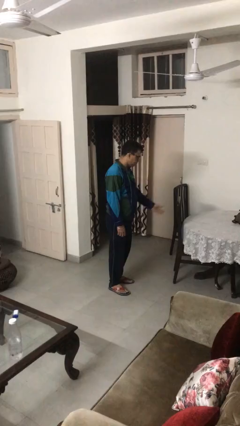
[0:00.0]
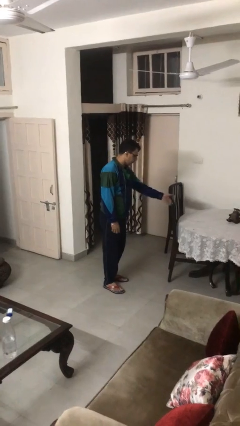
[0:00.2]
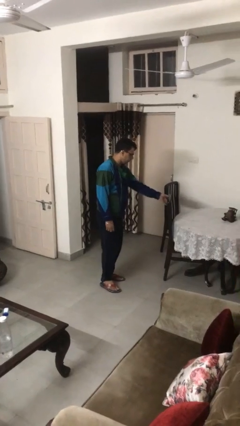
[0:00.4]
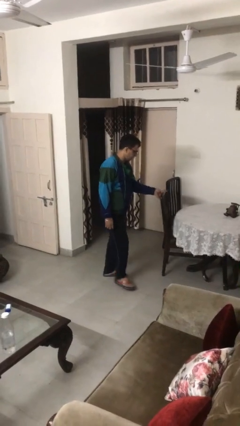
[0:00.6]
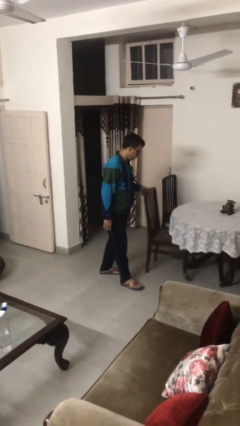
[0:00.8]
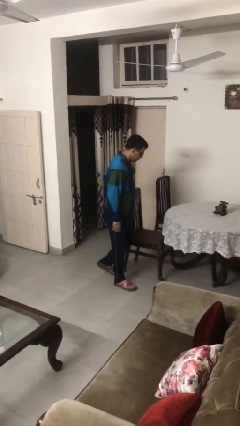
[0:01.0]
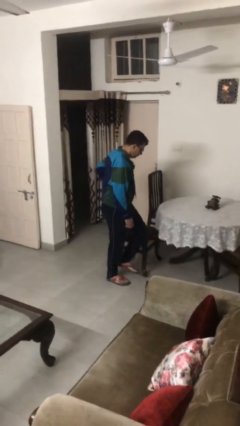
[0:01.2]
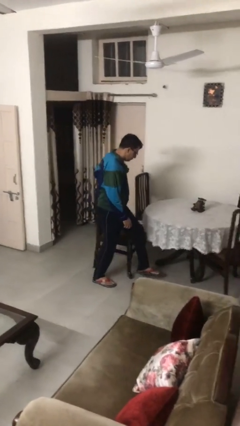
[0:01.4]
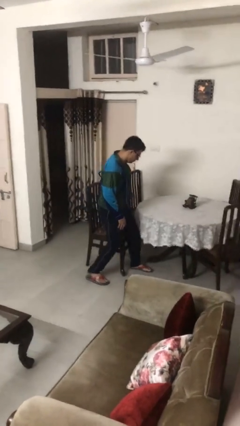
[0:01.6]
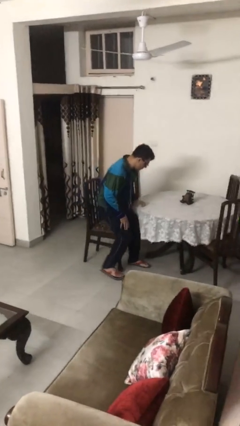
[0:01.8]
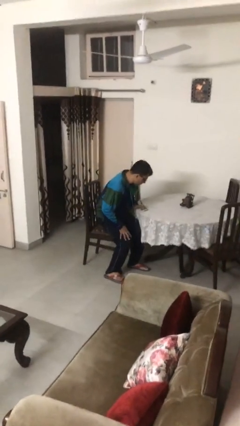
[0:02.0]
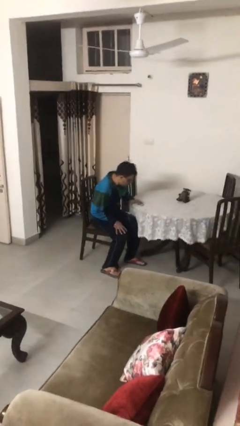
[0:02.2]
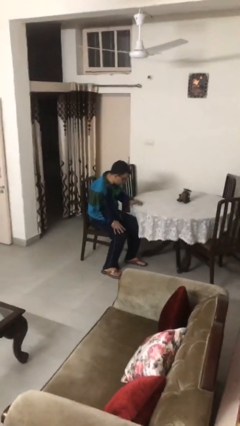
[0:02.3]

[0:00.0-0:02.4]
person sits down

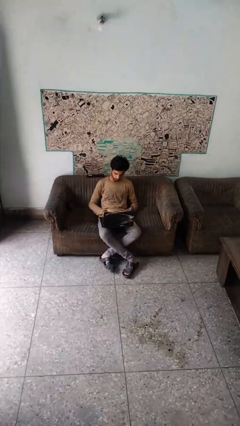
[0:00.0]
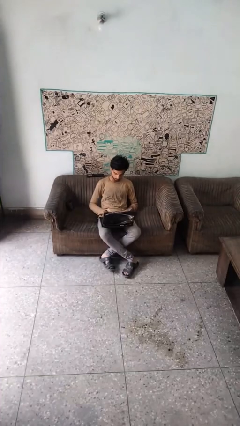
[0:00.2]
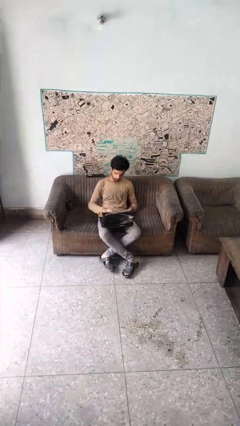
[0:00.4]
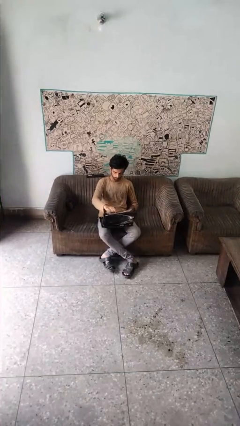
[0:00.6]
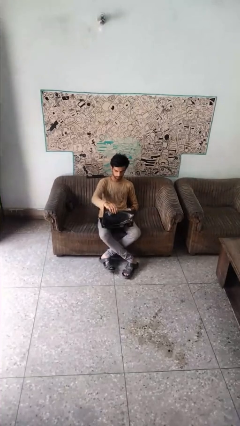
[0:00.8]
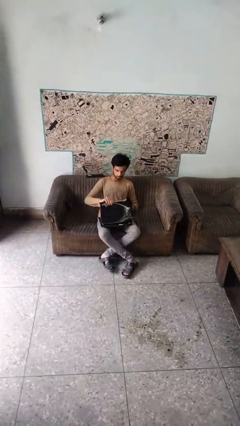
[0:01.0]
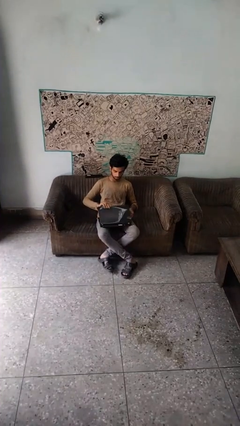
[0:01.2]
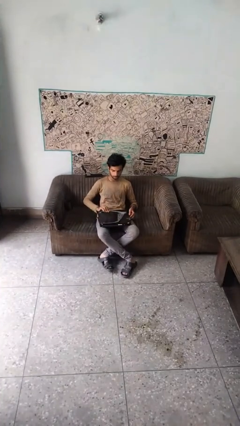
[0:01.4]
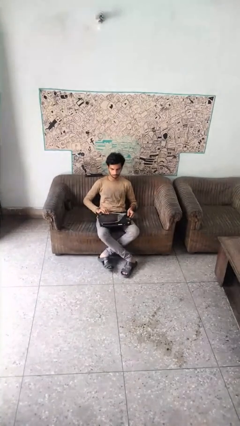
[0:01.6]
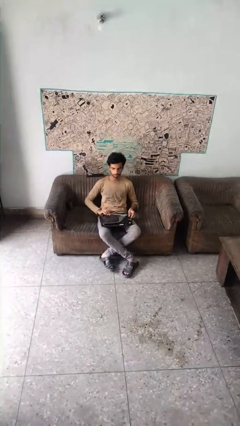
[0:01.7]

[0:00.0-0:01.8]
person closes laptop

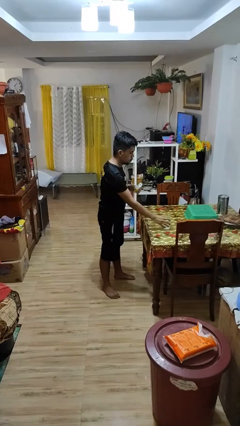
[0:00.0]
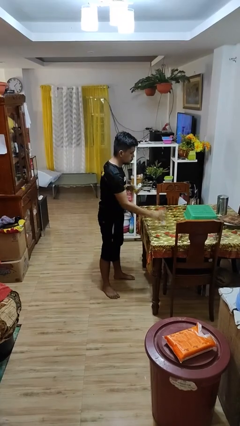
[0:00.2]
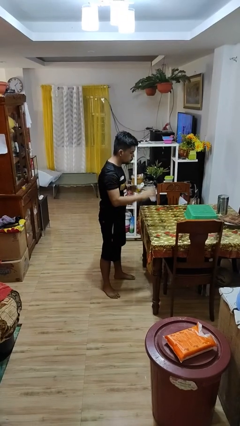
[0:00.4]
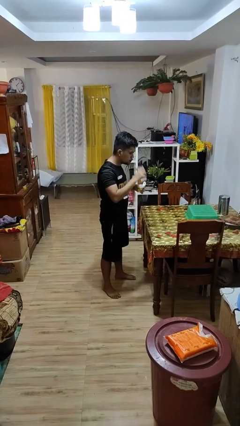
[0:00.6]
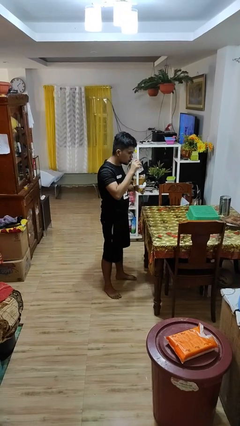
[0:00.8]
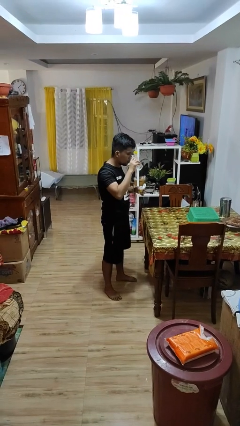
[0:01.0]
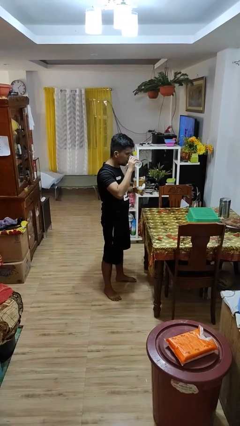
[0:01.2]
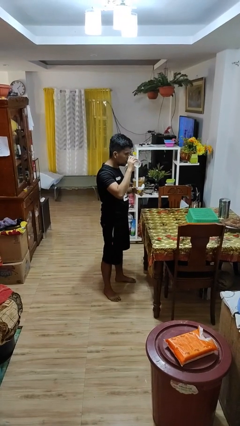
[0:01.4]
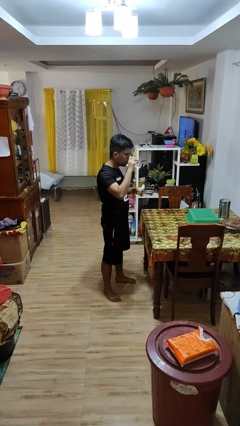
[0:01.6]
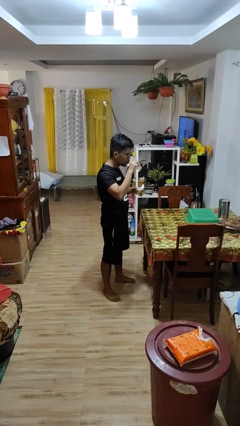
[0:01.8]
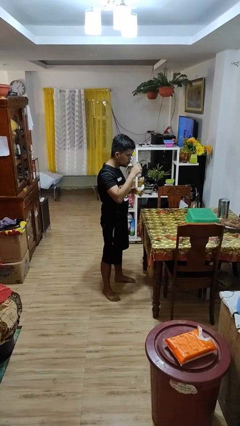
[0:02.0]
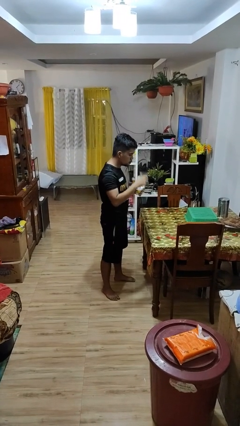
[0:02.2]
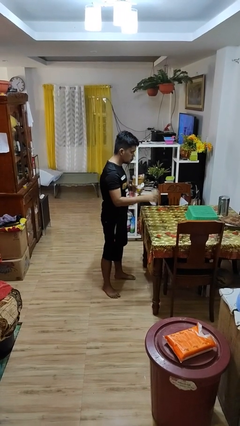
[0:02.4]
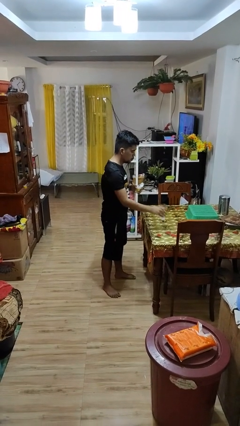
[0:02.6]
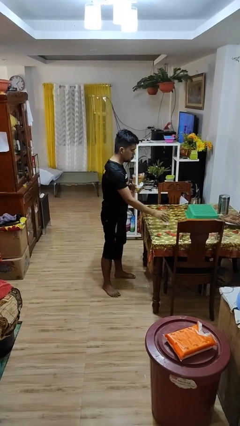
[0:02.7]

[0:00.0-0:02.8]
person drinks from cup

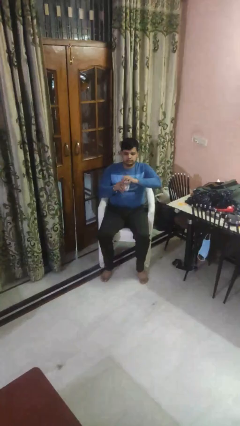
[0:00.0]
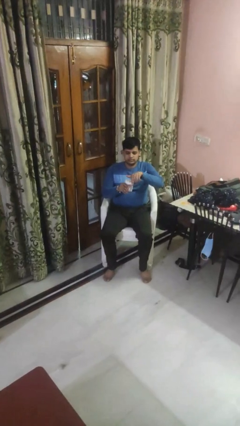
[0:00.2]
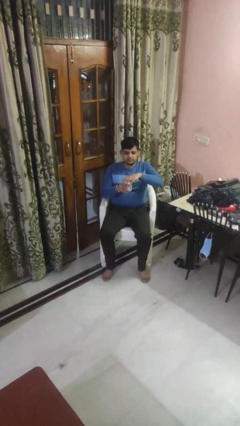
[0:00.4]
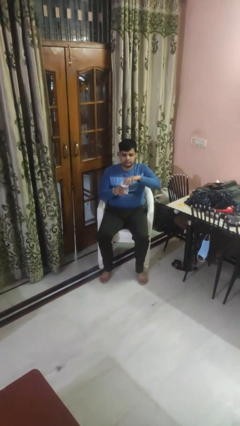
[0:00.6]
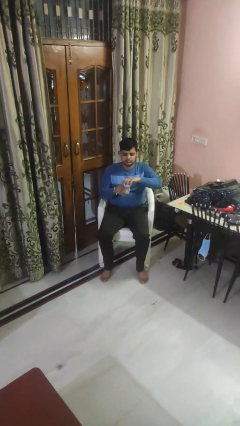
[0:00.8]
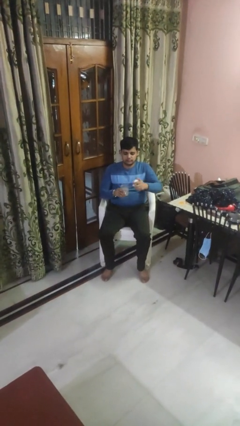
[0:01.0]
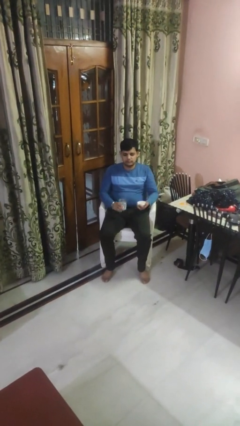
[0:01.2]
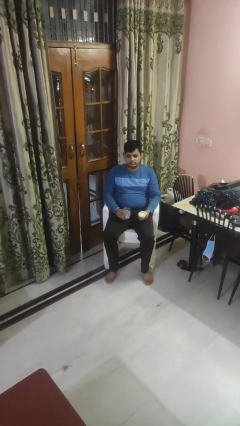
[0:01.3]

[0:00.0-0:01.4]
person opens jar

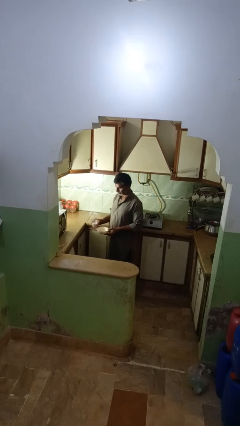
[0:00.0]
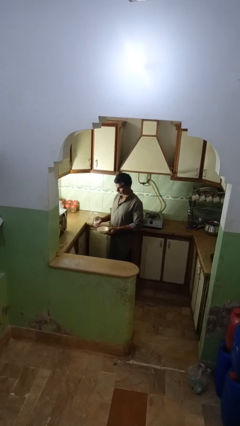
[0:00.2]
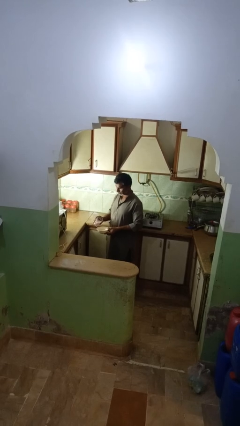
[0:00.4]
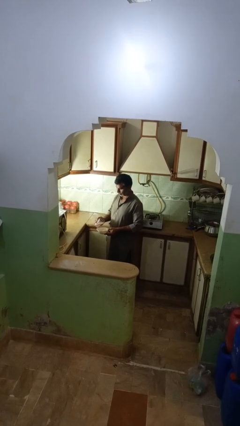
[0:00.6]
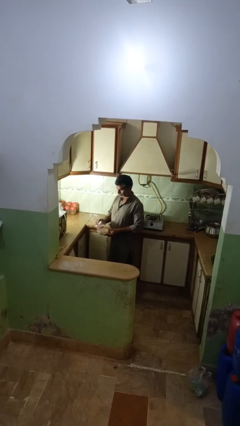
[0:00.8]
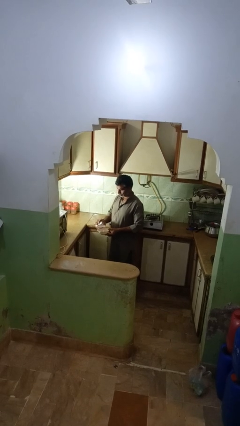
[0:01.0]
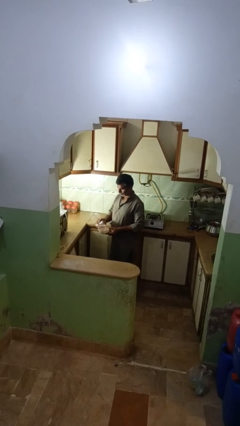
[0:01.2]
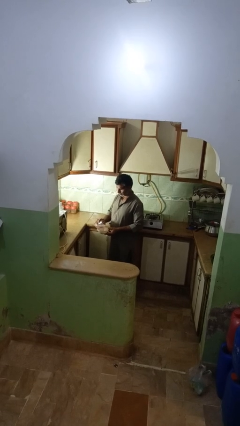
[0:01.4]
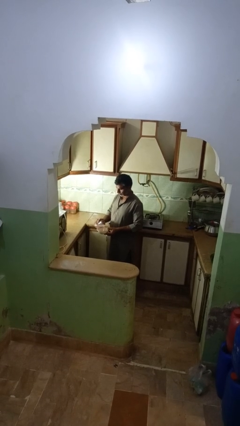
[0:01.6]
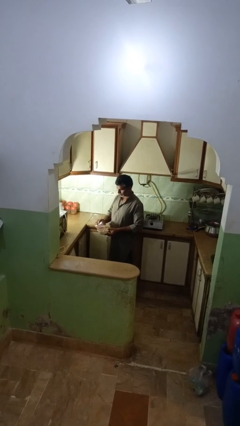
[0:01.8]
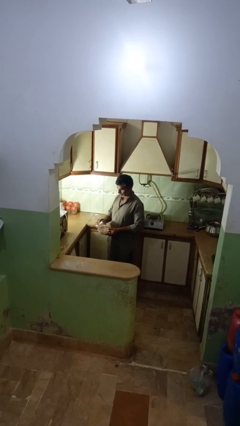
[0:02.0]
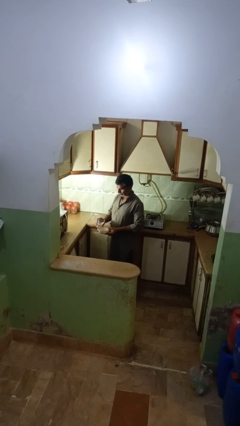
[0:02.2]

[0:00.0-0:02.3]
person pours into bowl

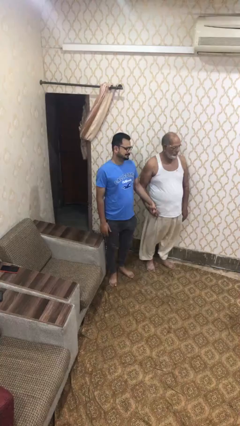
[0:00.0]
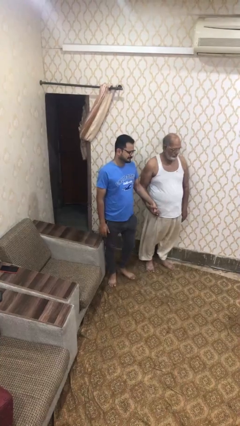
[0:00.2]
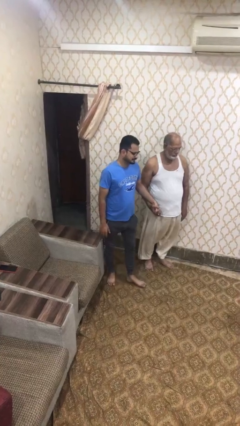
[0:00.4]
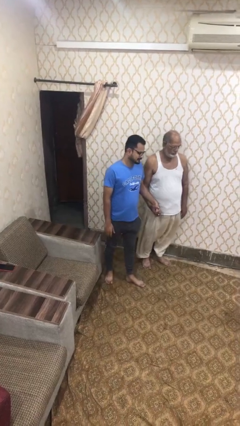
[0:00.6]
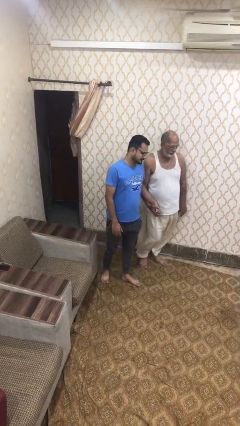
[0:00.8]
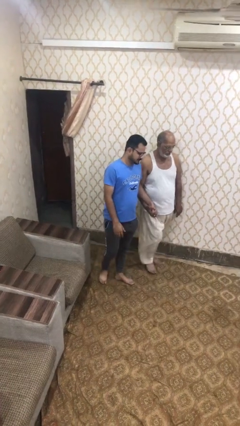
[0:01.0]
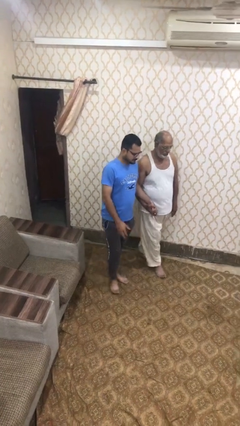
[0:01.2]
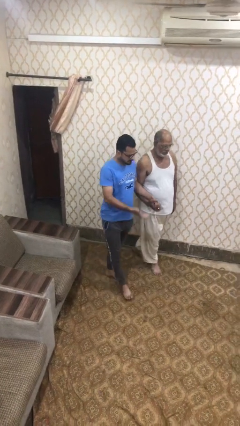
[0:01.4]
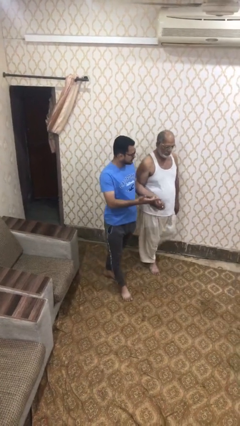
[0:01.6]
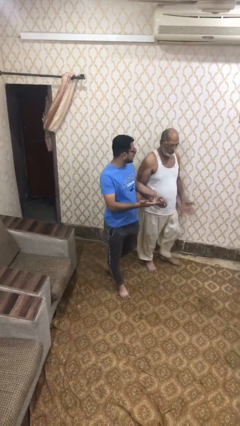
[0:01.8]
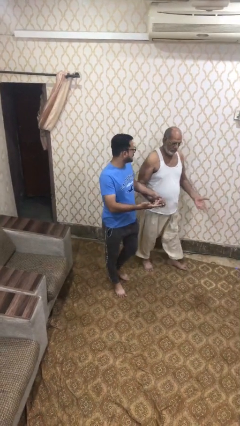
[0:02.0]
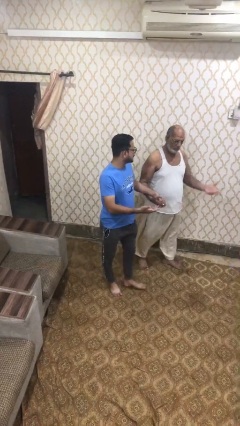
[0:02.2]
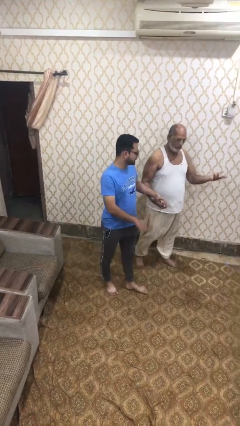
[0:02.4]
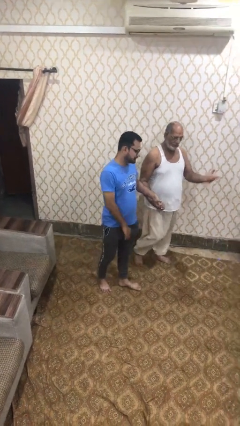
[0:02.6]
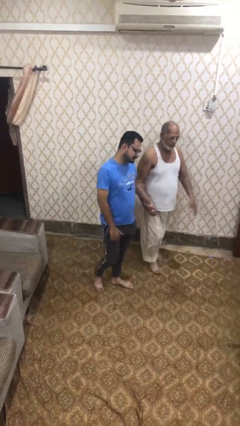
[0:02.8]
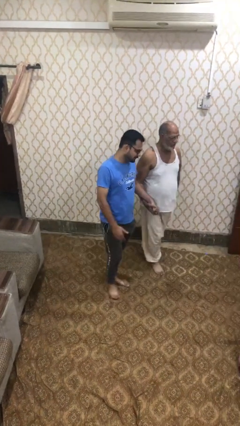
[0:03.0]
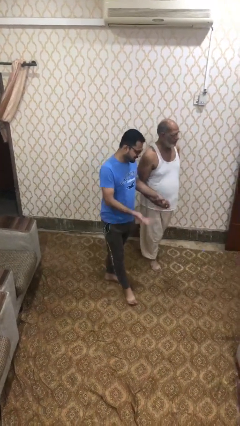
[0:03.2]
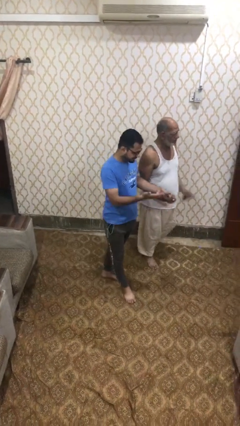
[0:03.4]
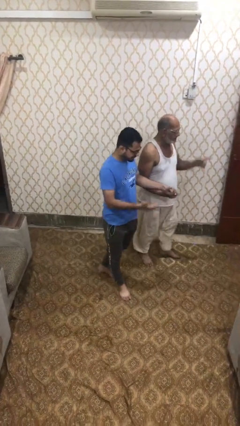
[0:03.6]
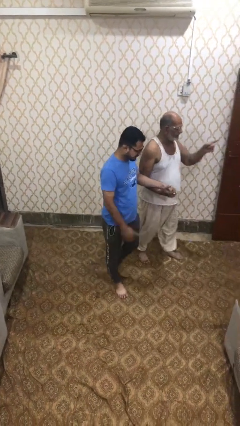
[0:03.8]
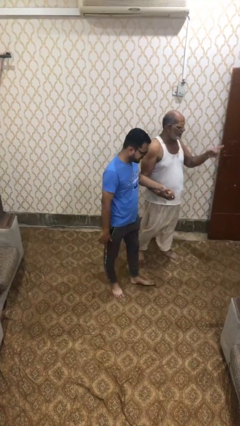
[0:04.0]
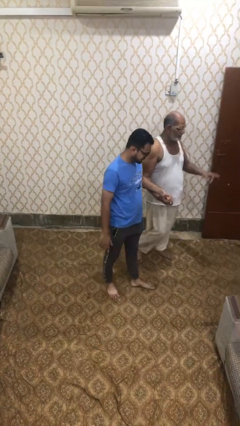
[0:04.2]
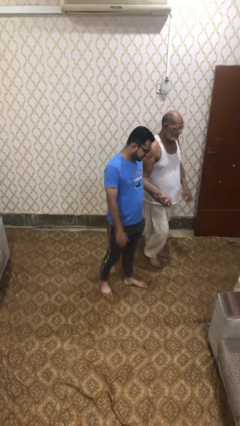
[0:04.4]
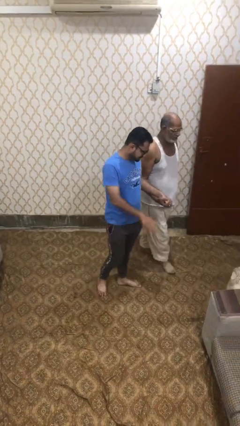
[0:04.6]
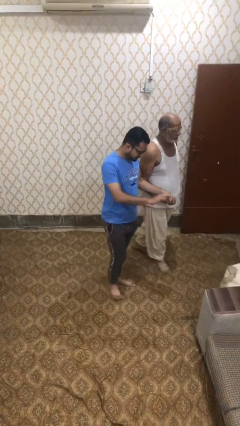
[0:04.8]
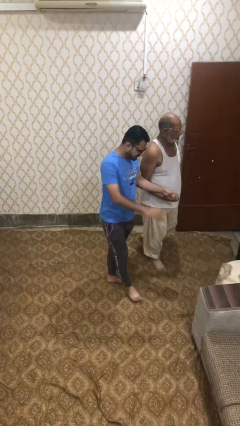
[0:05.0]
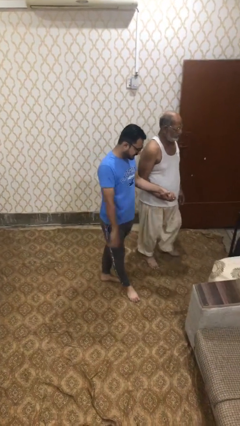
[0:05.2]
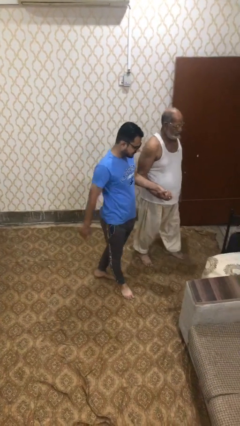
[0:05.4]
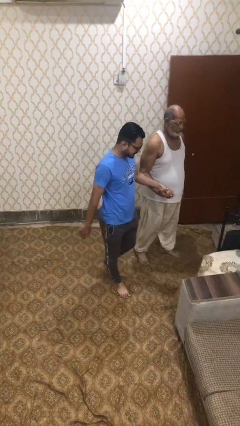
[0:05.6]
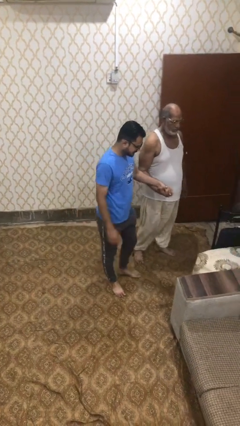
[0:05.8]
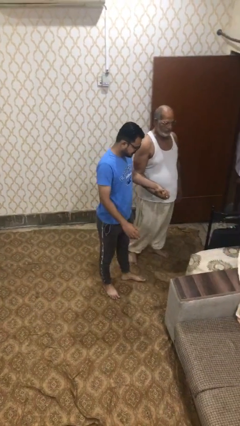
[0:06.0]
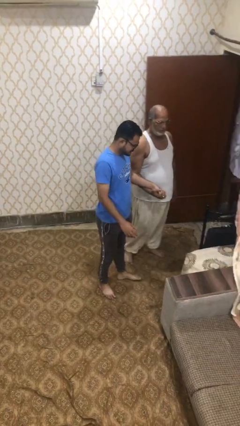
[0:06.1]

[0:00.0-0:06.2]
person holds hand

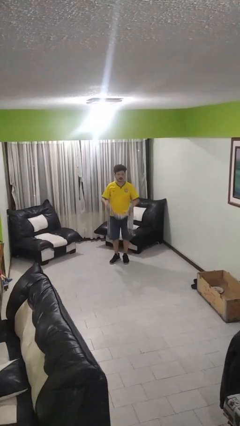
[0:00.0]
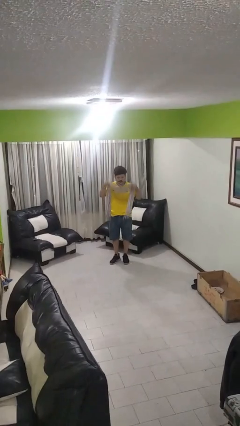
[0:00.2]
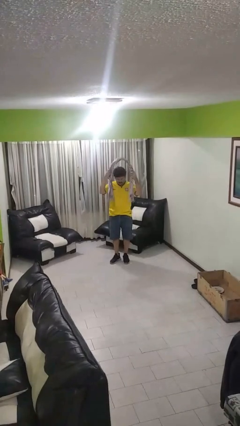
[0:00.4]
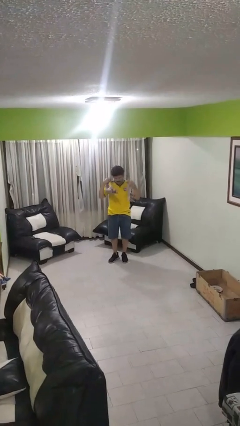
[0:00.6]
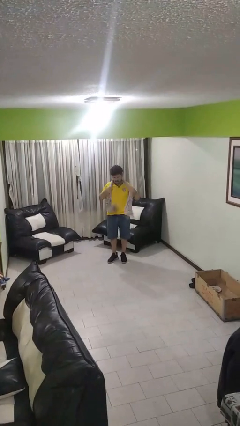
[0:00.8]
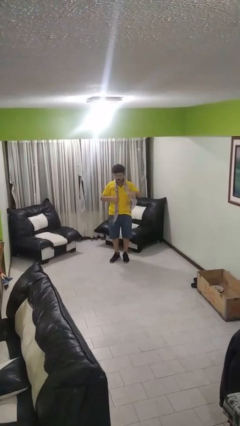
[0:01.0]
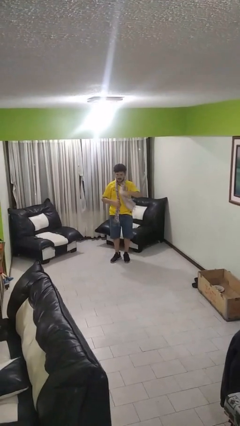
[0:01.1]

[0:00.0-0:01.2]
person puts on scarf
